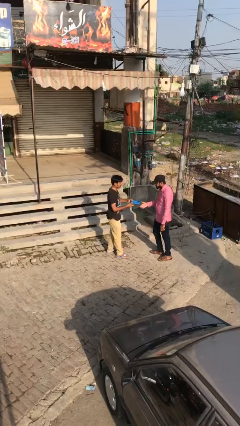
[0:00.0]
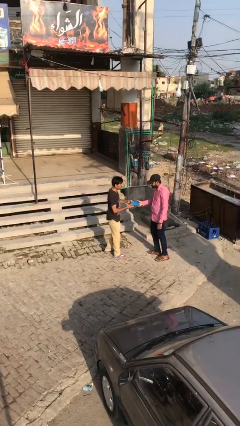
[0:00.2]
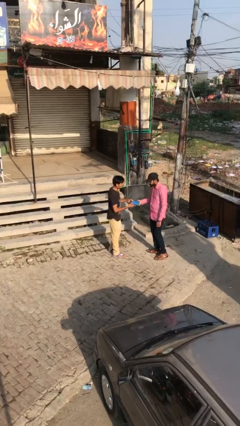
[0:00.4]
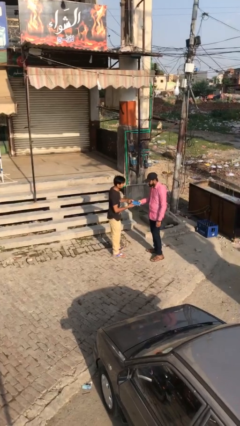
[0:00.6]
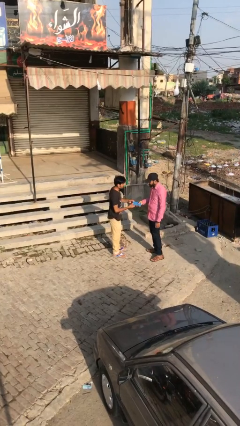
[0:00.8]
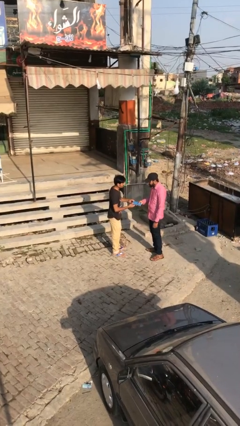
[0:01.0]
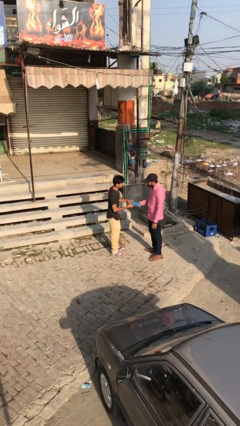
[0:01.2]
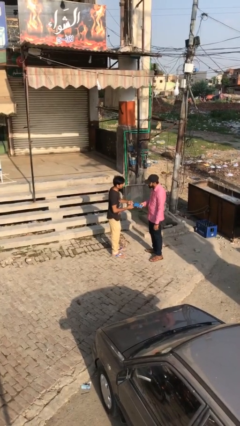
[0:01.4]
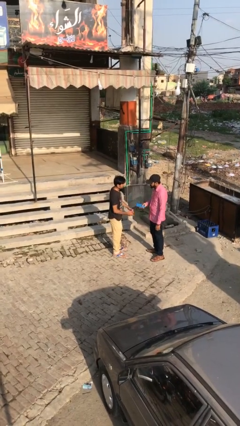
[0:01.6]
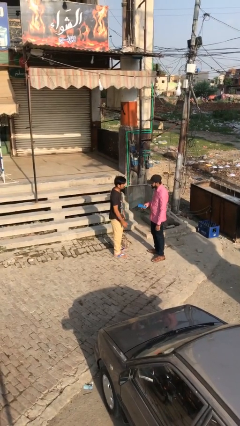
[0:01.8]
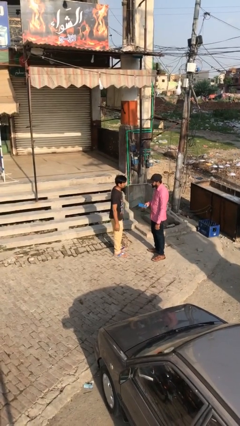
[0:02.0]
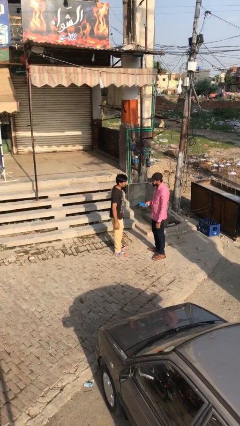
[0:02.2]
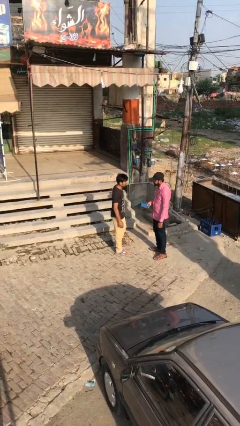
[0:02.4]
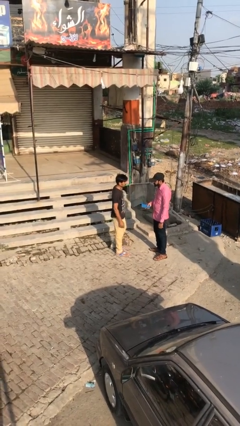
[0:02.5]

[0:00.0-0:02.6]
person transfers object to person

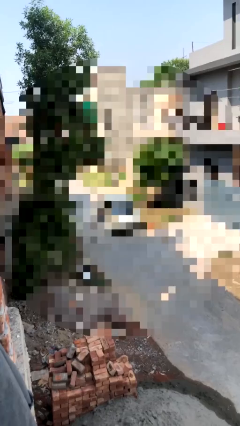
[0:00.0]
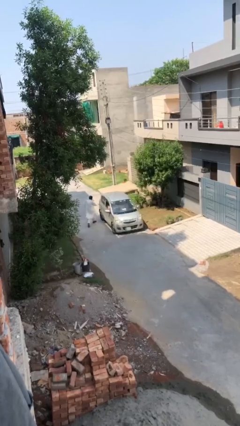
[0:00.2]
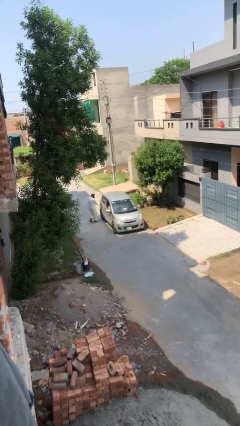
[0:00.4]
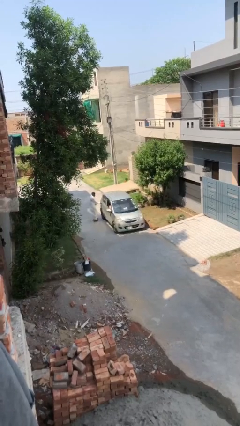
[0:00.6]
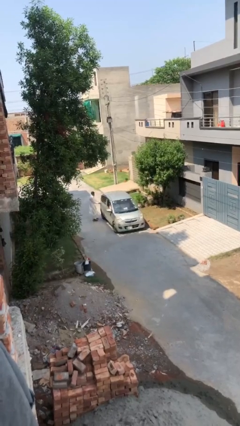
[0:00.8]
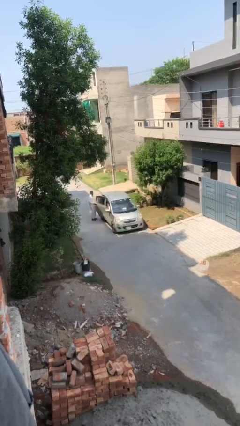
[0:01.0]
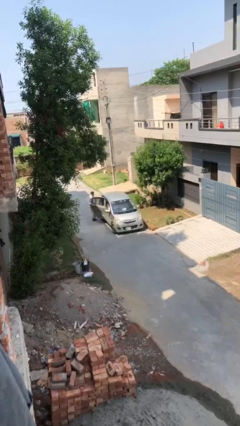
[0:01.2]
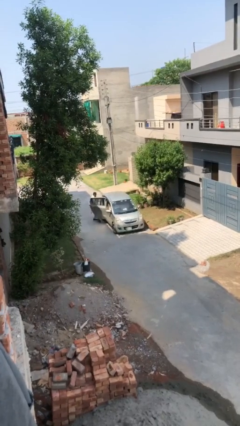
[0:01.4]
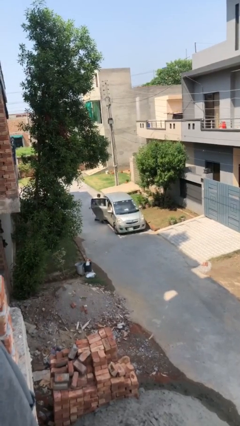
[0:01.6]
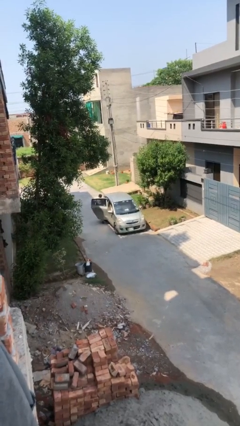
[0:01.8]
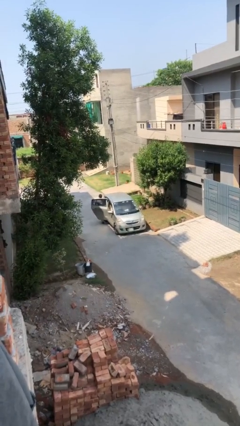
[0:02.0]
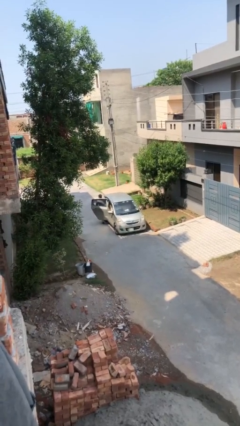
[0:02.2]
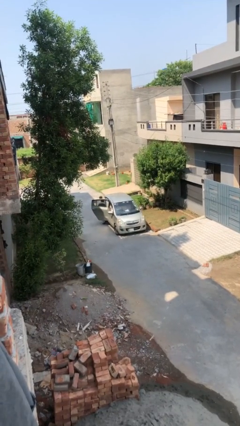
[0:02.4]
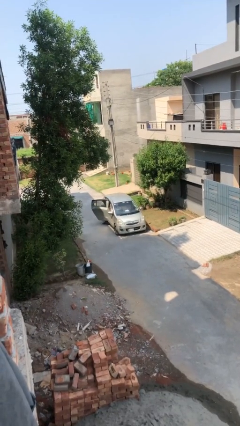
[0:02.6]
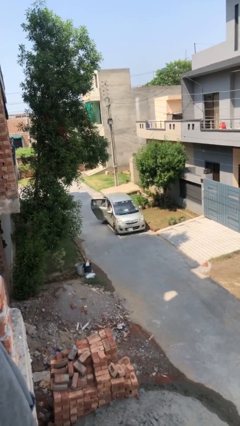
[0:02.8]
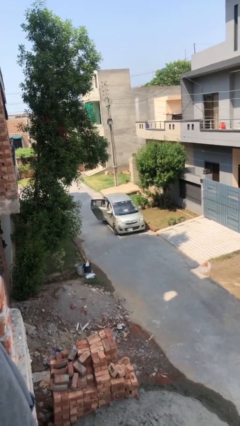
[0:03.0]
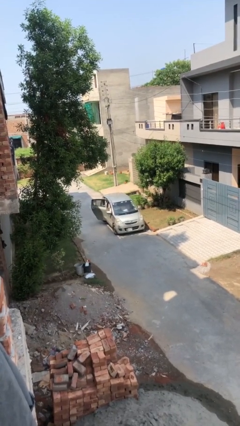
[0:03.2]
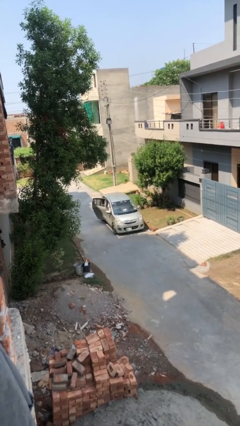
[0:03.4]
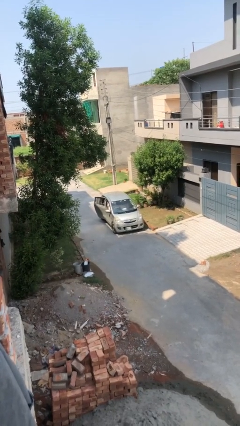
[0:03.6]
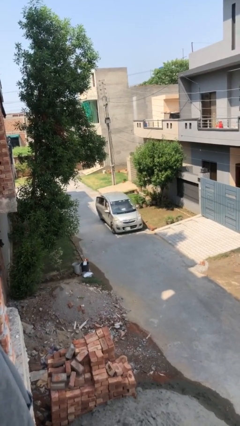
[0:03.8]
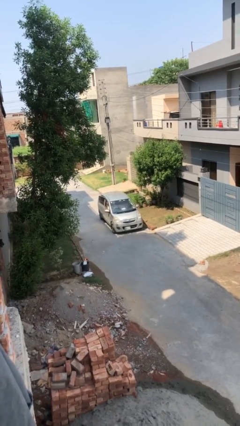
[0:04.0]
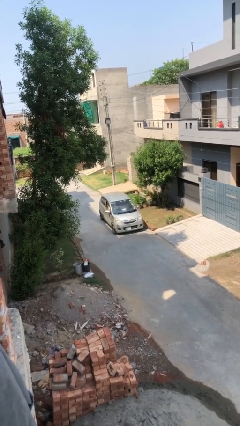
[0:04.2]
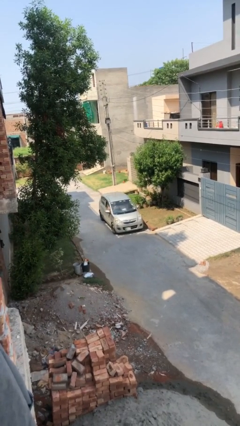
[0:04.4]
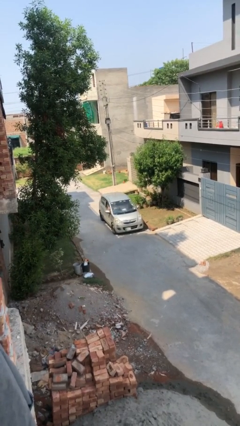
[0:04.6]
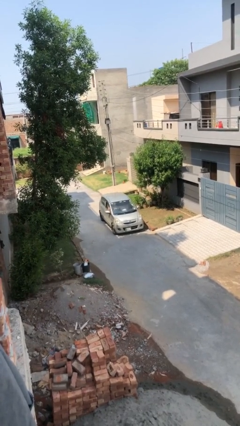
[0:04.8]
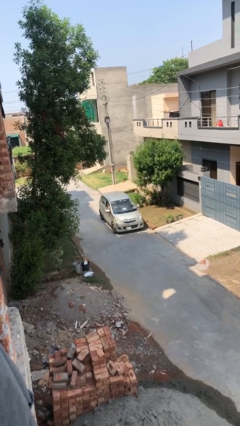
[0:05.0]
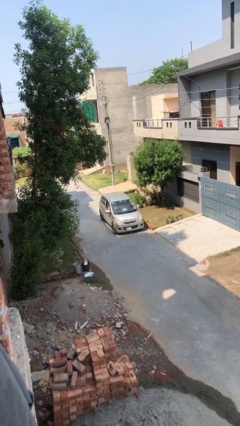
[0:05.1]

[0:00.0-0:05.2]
car picks up person

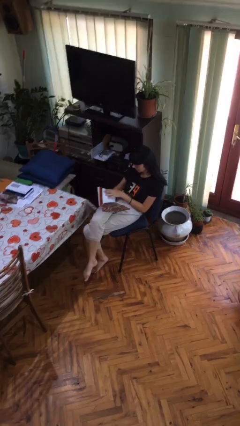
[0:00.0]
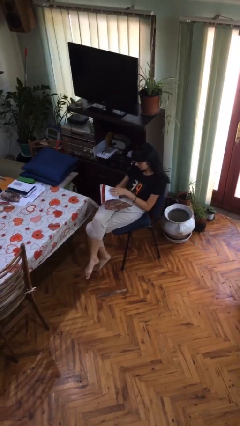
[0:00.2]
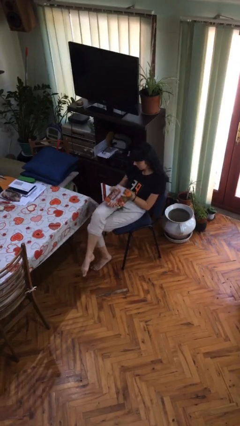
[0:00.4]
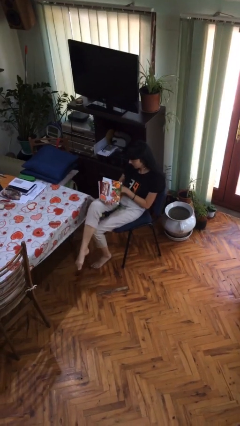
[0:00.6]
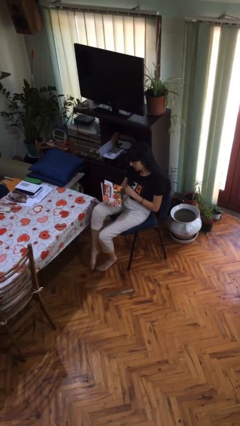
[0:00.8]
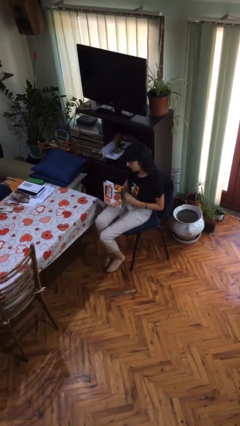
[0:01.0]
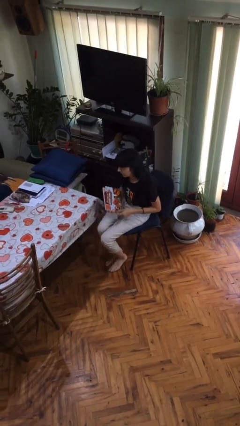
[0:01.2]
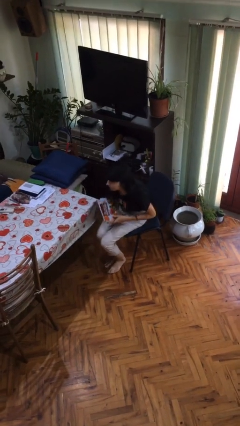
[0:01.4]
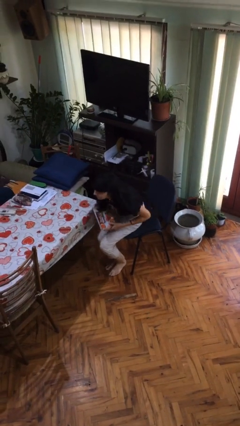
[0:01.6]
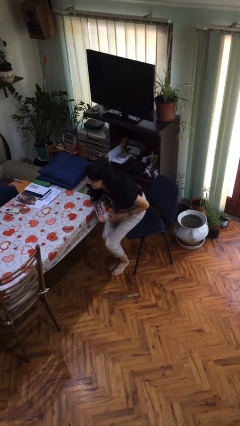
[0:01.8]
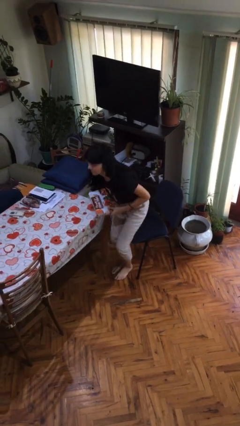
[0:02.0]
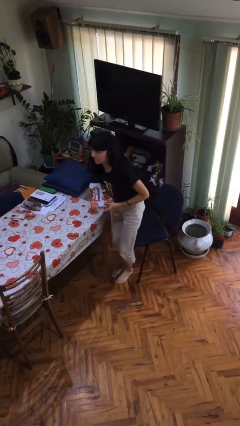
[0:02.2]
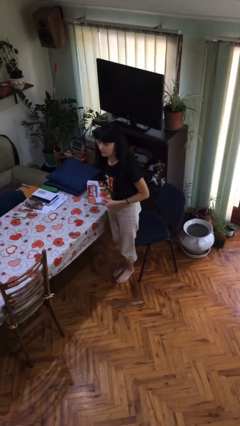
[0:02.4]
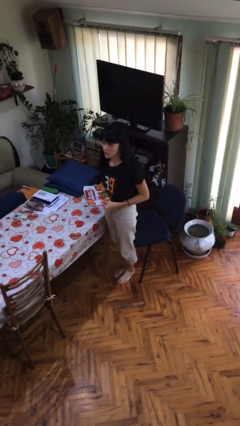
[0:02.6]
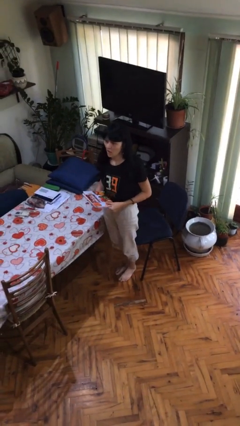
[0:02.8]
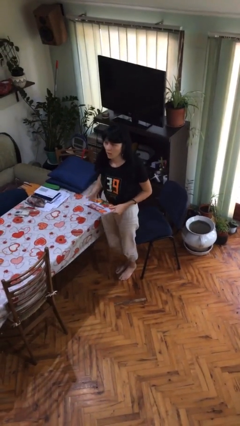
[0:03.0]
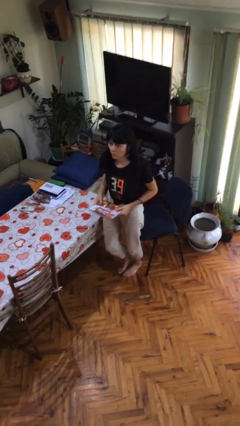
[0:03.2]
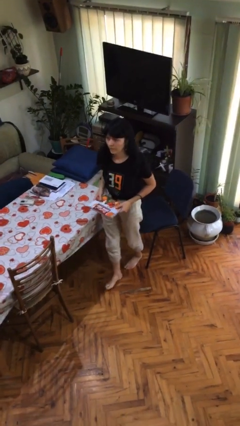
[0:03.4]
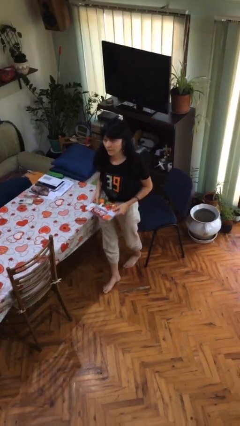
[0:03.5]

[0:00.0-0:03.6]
person stands up

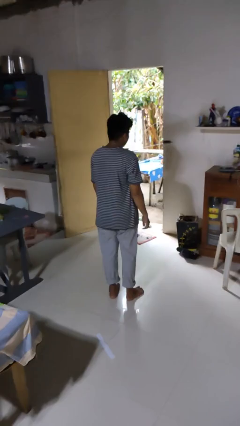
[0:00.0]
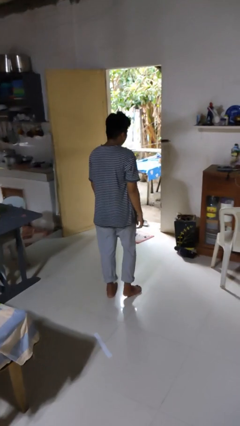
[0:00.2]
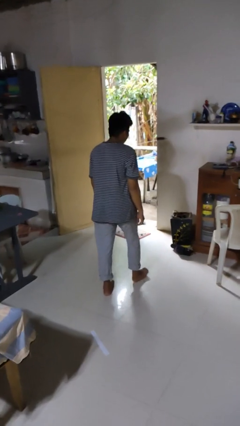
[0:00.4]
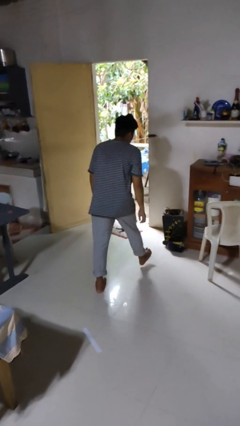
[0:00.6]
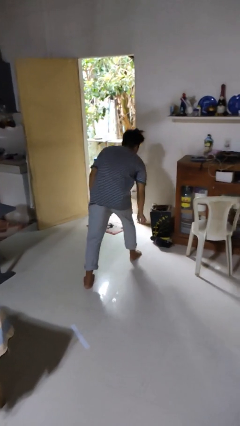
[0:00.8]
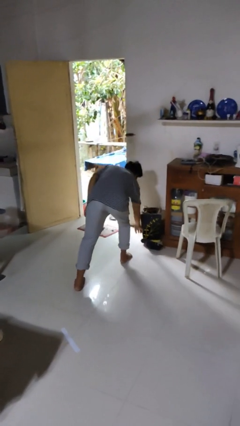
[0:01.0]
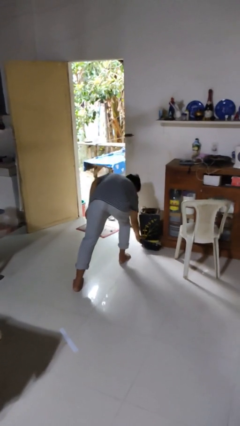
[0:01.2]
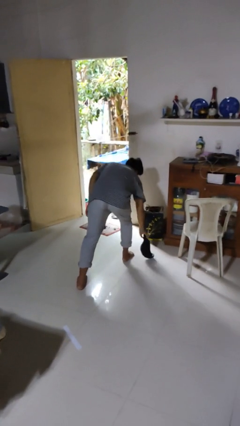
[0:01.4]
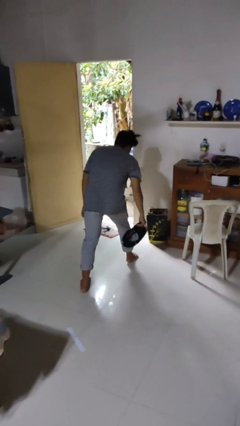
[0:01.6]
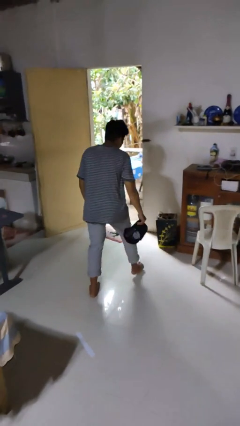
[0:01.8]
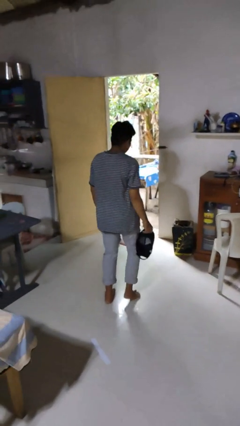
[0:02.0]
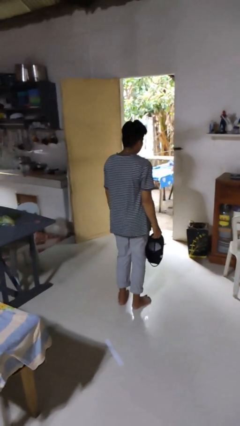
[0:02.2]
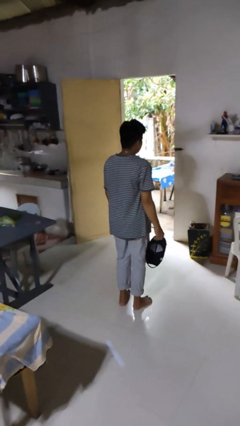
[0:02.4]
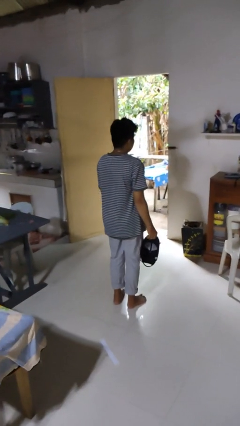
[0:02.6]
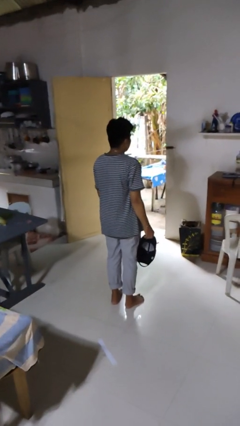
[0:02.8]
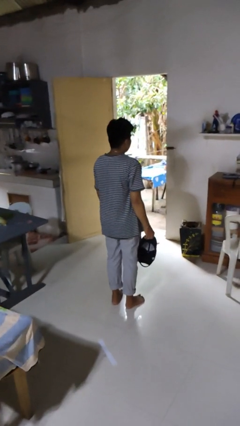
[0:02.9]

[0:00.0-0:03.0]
person picks up object from floor

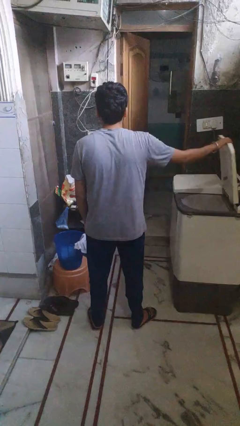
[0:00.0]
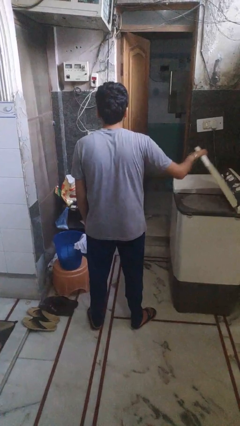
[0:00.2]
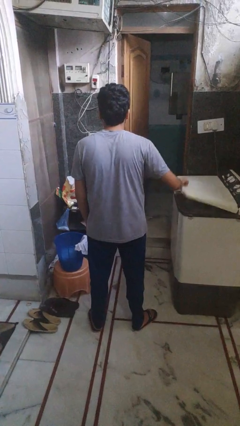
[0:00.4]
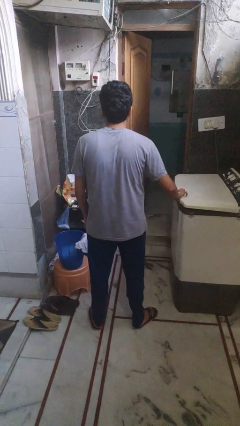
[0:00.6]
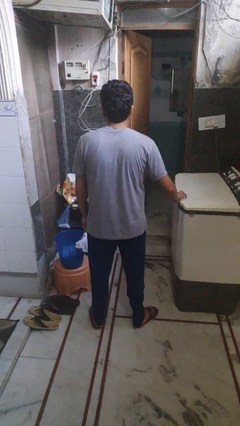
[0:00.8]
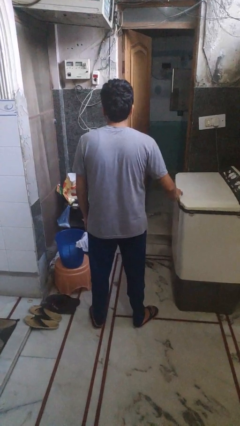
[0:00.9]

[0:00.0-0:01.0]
person closes clothes washer

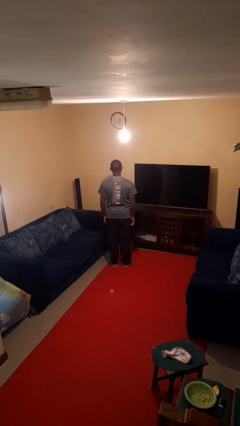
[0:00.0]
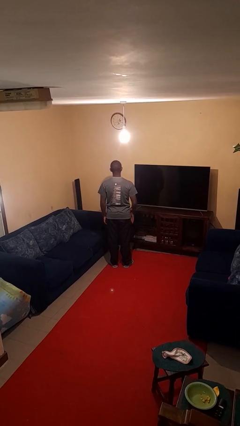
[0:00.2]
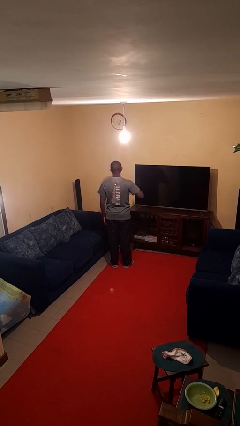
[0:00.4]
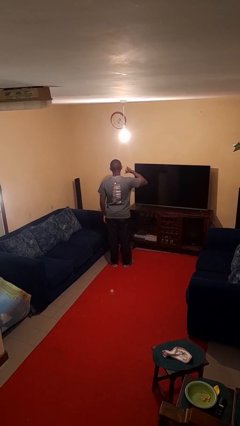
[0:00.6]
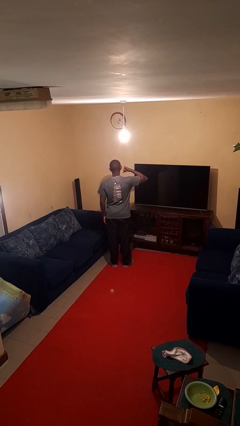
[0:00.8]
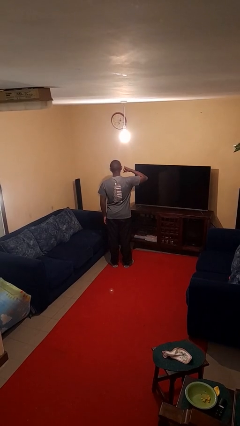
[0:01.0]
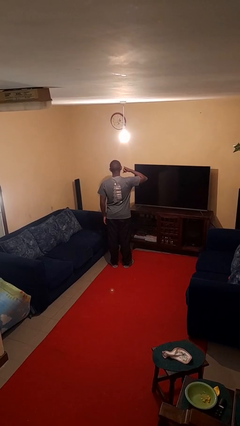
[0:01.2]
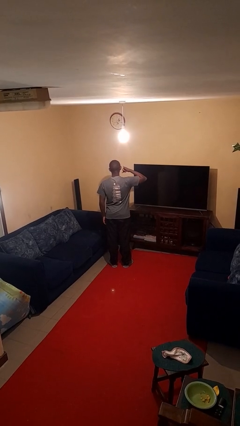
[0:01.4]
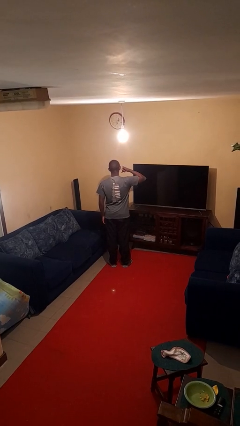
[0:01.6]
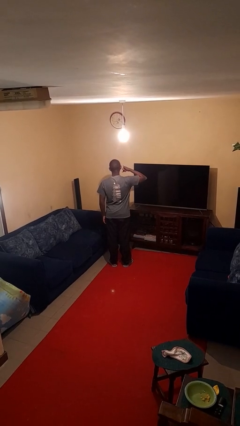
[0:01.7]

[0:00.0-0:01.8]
person gestures call me

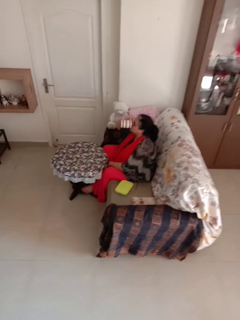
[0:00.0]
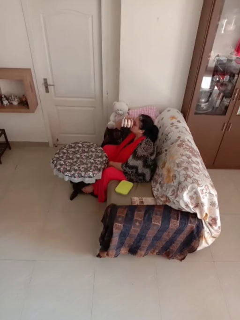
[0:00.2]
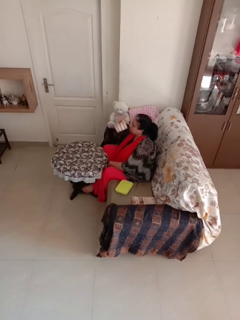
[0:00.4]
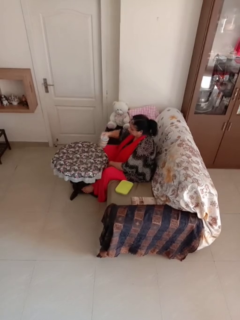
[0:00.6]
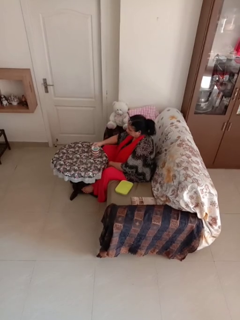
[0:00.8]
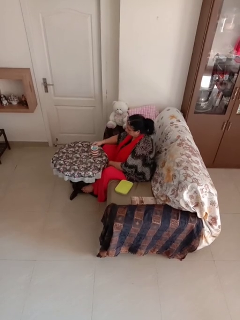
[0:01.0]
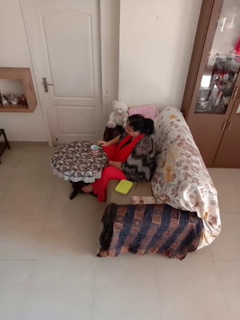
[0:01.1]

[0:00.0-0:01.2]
person drinks from mug
